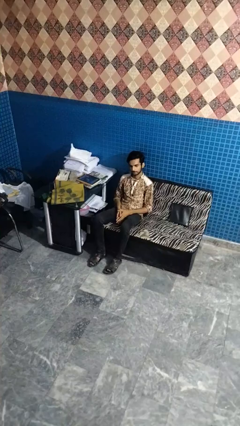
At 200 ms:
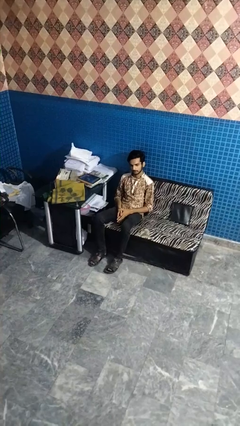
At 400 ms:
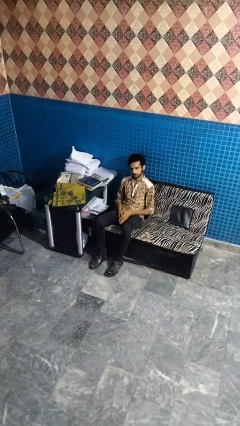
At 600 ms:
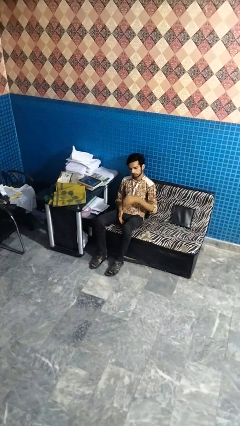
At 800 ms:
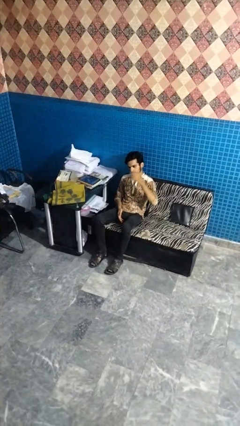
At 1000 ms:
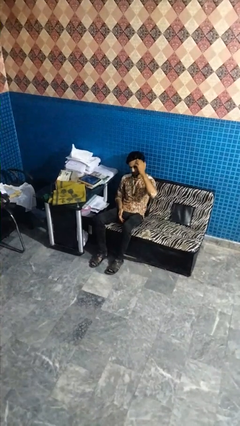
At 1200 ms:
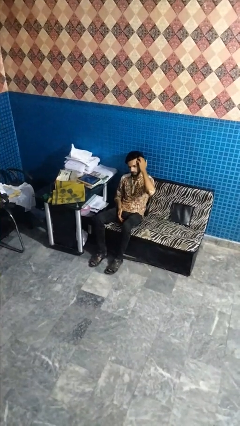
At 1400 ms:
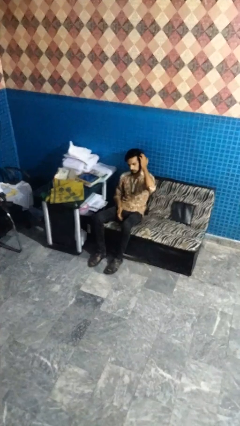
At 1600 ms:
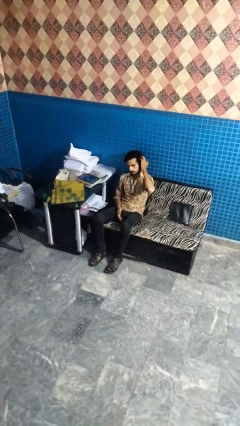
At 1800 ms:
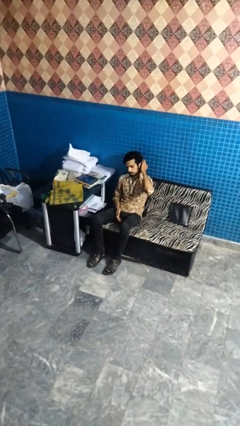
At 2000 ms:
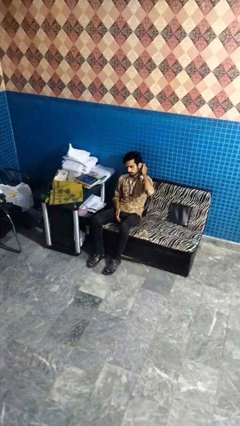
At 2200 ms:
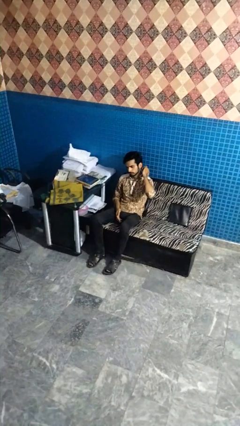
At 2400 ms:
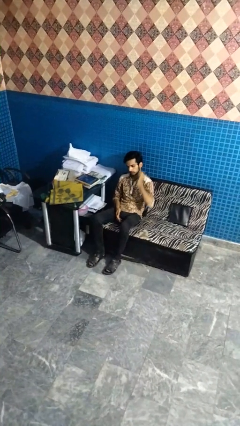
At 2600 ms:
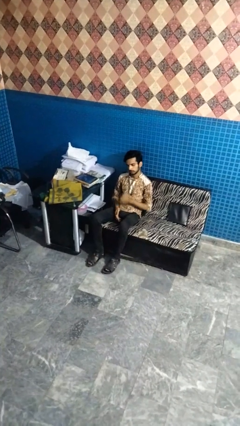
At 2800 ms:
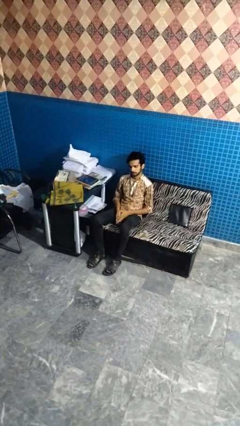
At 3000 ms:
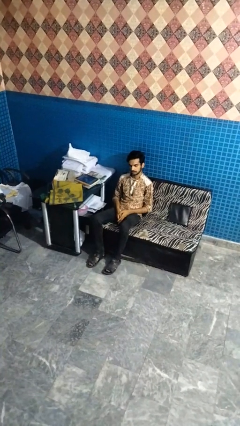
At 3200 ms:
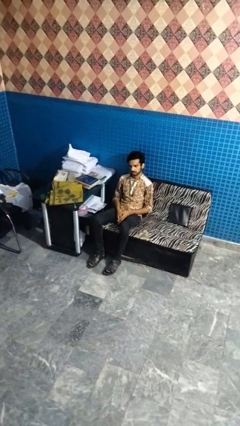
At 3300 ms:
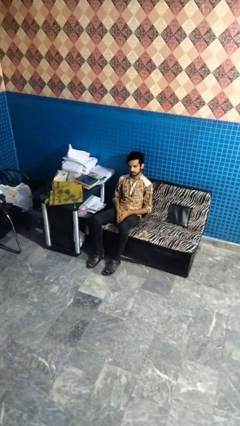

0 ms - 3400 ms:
person strokes hair

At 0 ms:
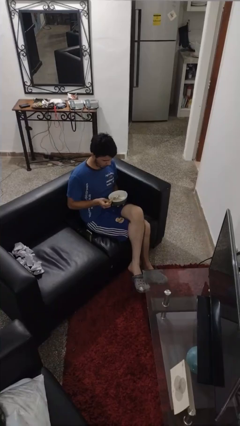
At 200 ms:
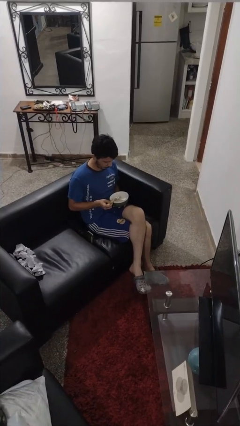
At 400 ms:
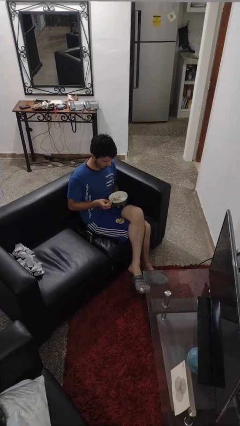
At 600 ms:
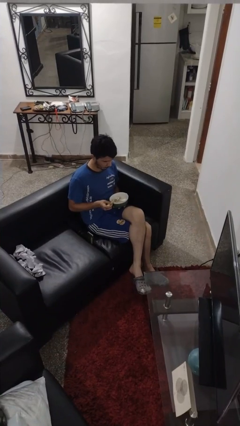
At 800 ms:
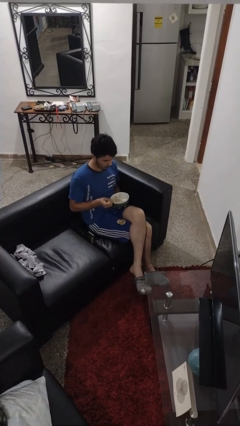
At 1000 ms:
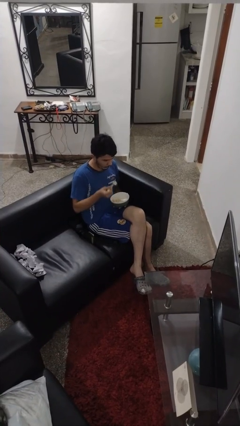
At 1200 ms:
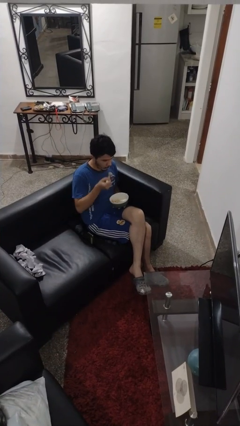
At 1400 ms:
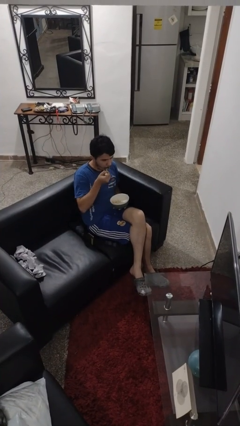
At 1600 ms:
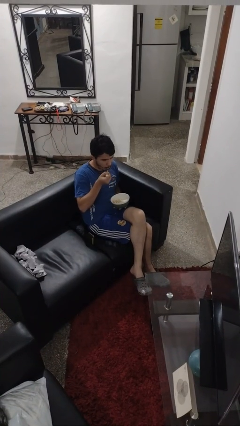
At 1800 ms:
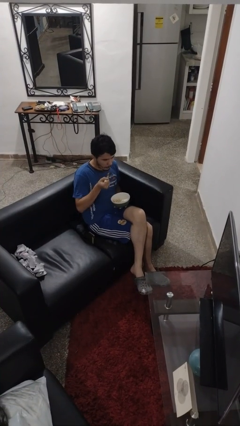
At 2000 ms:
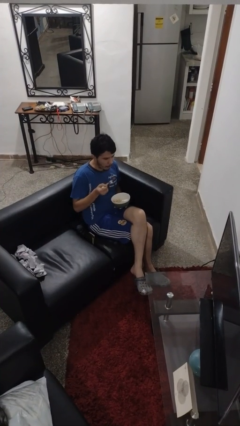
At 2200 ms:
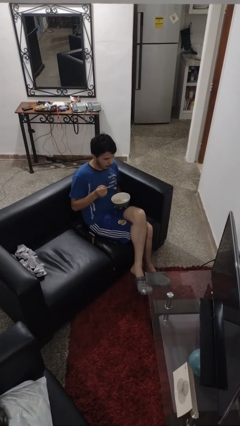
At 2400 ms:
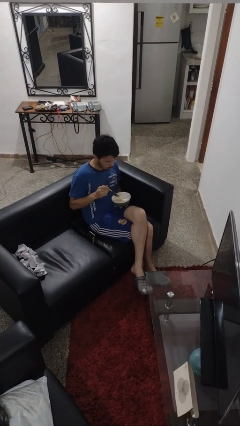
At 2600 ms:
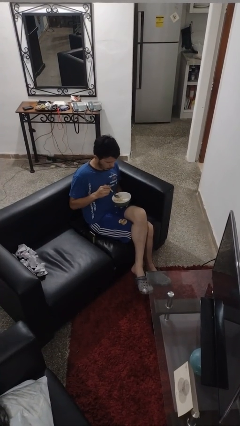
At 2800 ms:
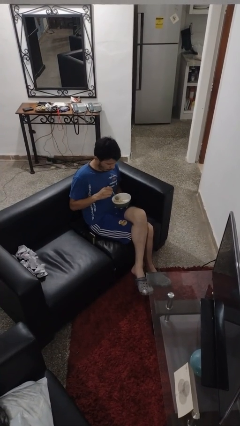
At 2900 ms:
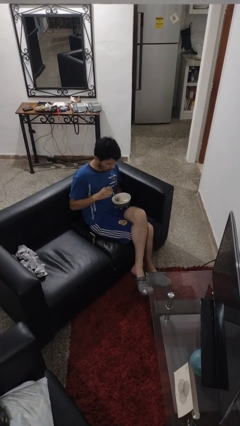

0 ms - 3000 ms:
person eats with utensil

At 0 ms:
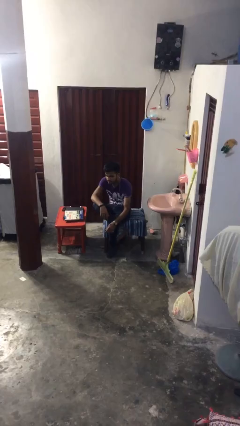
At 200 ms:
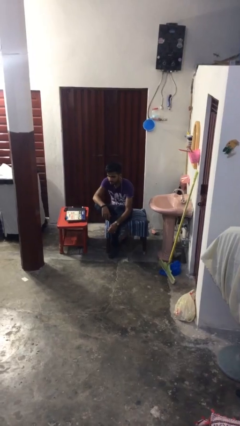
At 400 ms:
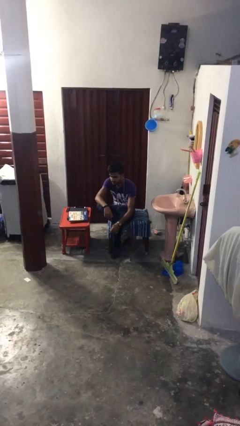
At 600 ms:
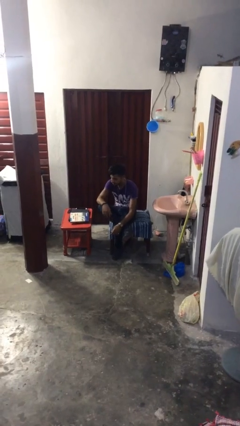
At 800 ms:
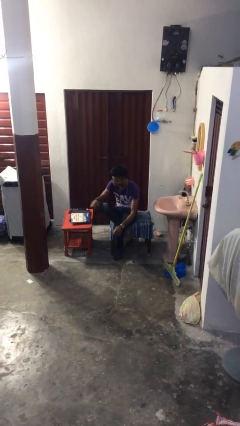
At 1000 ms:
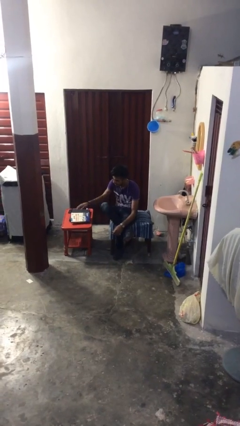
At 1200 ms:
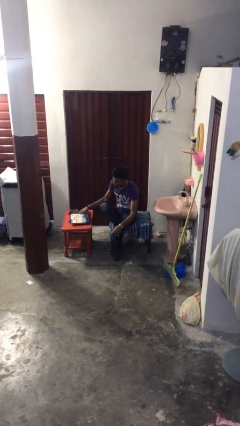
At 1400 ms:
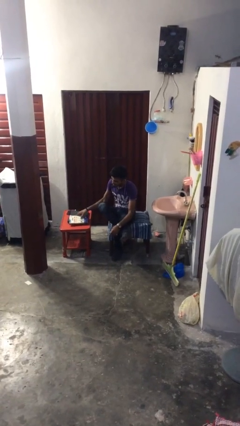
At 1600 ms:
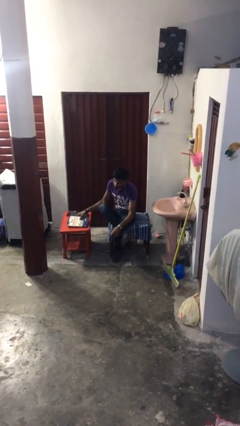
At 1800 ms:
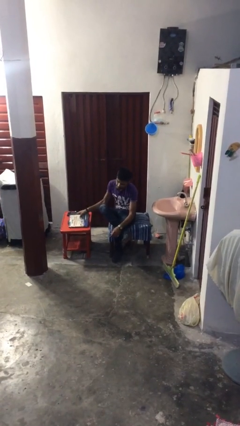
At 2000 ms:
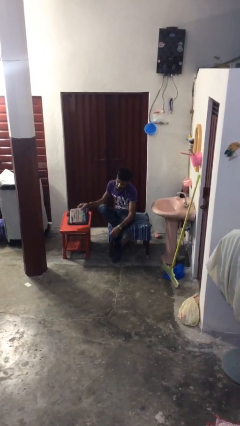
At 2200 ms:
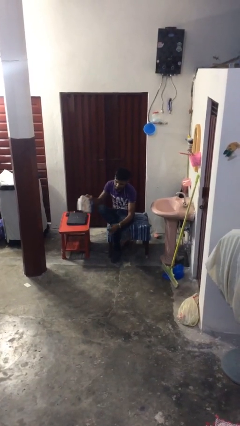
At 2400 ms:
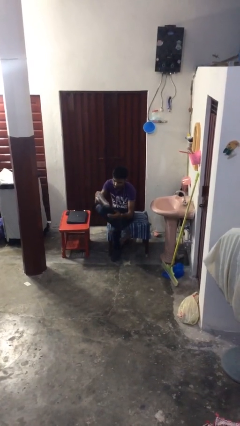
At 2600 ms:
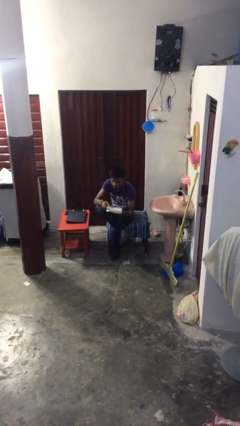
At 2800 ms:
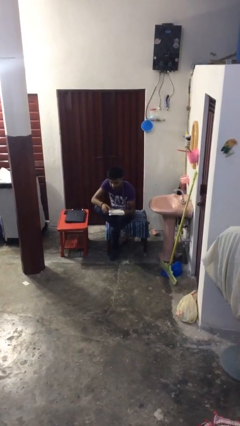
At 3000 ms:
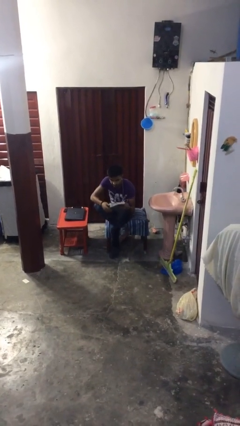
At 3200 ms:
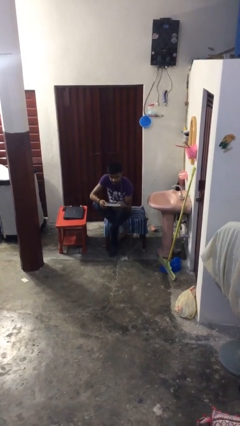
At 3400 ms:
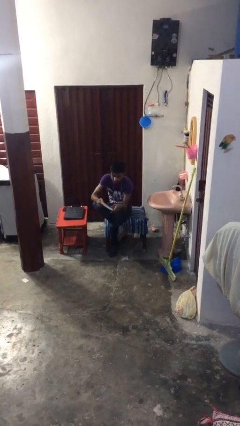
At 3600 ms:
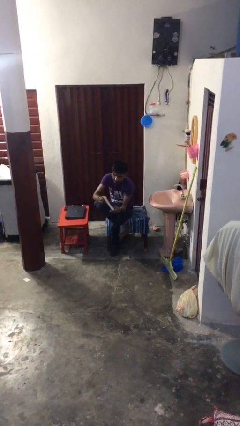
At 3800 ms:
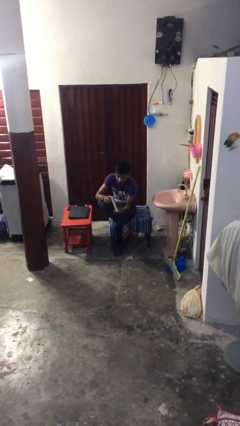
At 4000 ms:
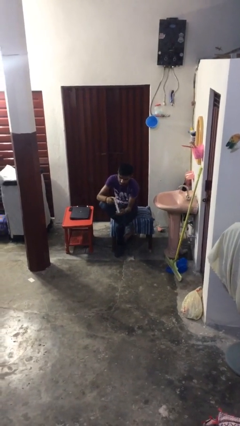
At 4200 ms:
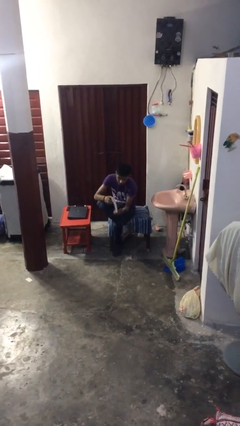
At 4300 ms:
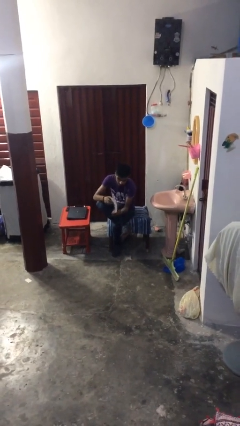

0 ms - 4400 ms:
person picks up object from table

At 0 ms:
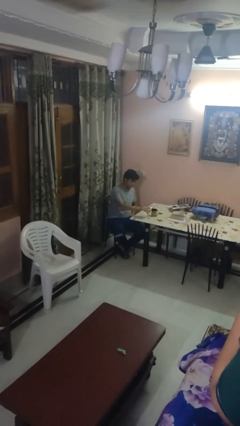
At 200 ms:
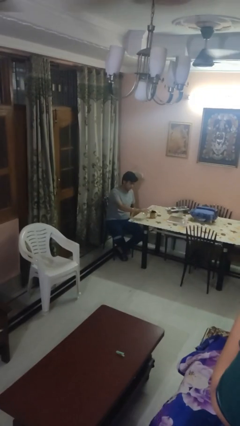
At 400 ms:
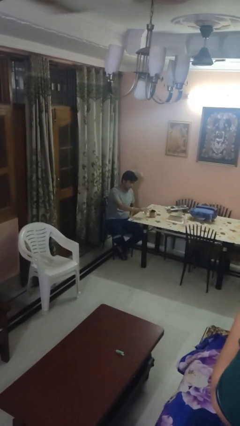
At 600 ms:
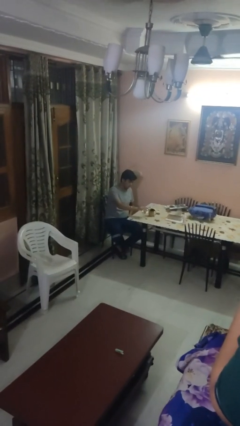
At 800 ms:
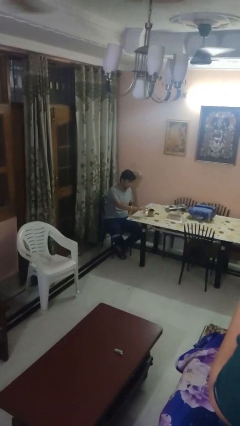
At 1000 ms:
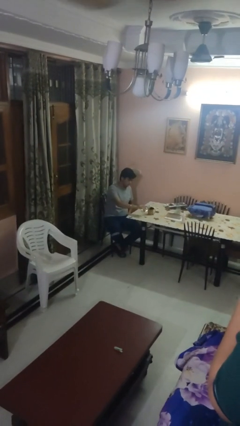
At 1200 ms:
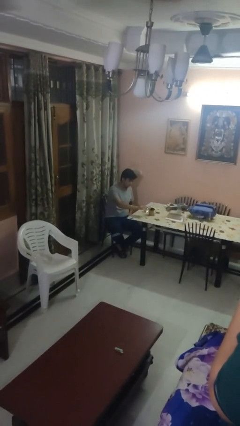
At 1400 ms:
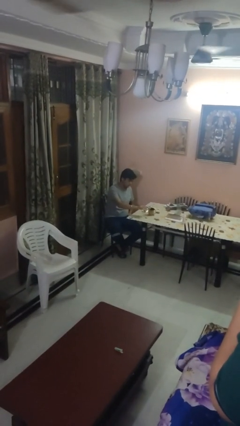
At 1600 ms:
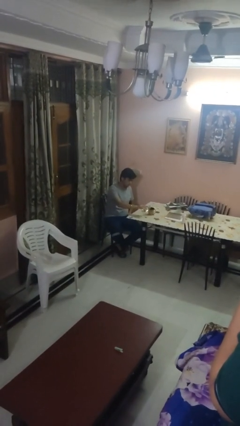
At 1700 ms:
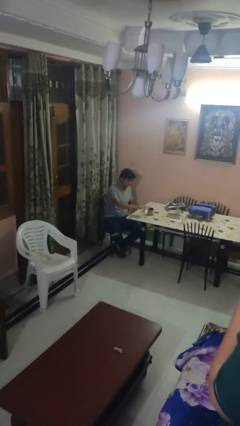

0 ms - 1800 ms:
person pours liquid into cup

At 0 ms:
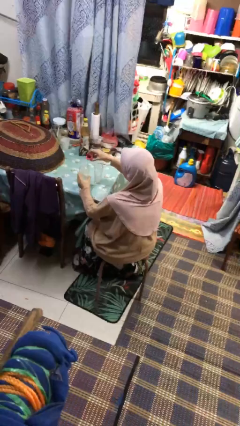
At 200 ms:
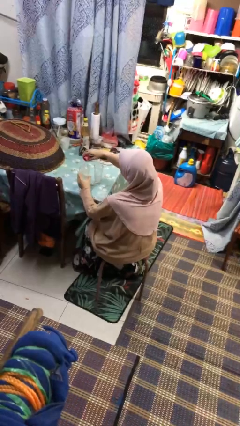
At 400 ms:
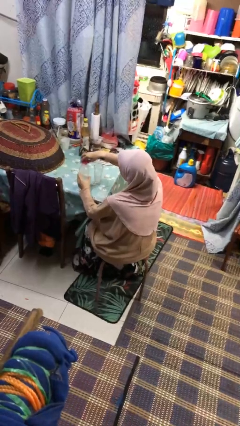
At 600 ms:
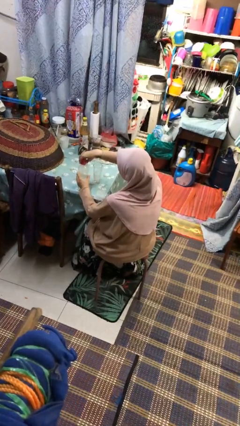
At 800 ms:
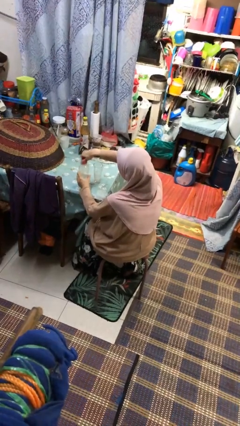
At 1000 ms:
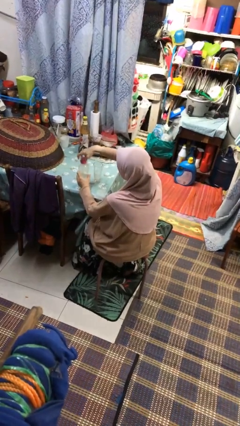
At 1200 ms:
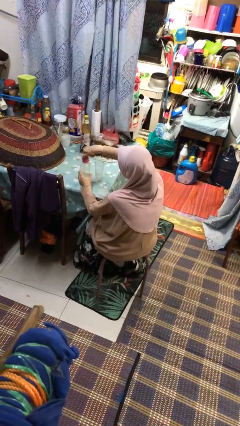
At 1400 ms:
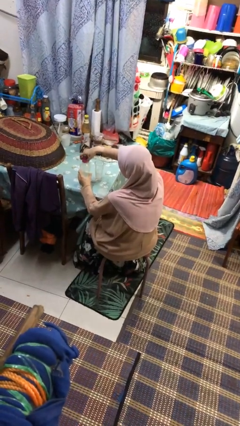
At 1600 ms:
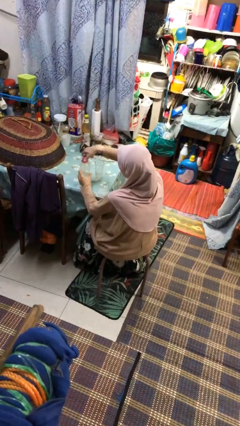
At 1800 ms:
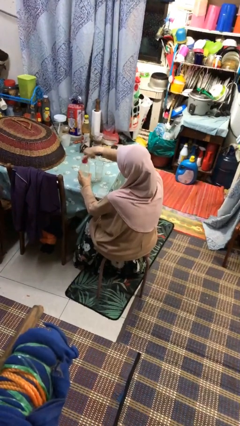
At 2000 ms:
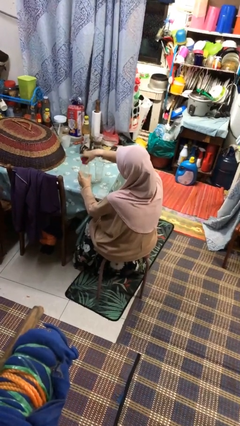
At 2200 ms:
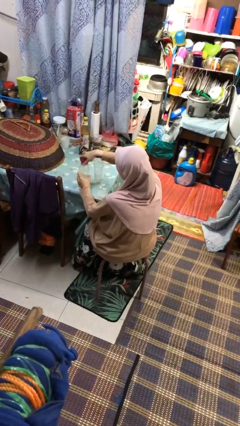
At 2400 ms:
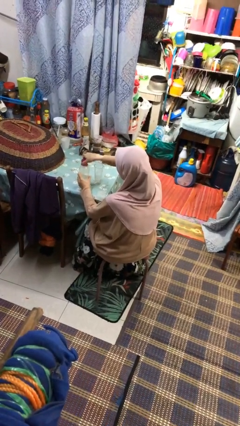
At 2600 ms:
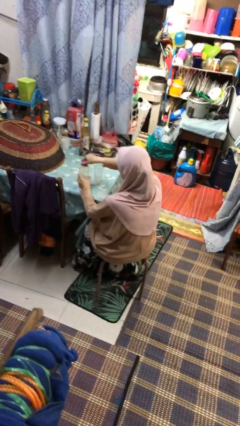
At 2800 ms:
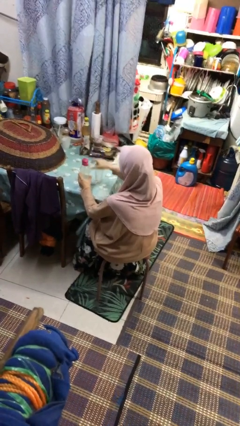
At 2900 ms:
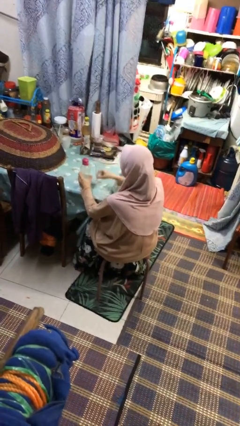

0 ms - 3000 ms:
person screws lid to bottle

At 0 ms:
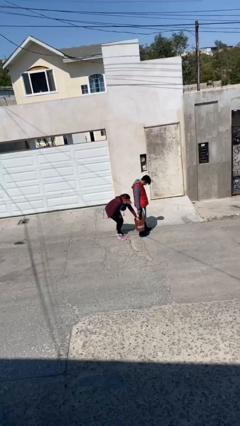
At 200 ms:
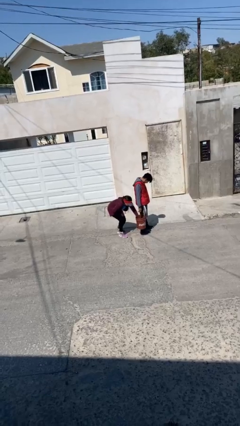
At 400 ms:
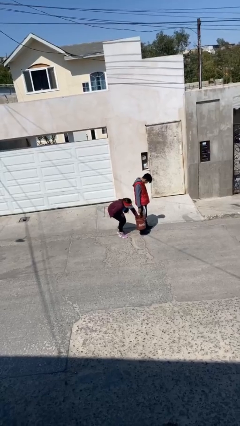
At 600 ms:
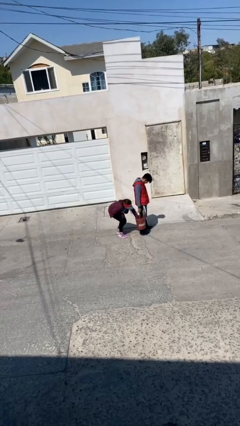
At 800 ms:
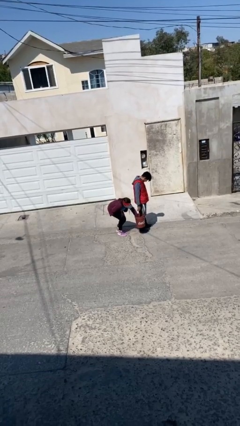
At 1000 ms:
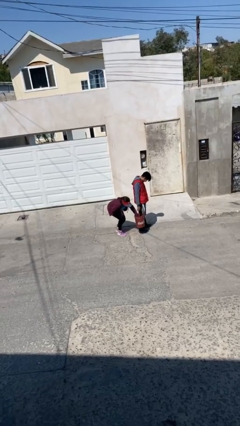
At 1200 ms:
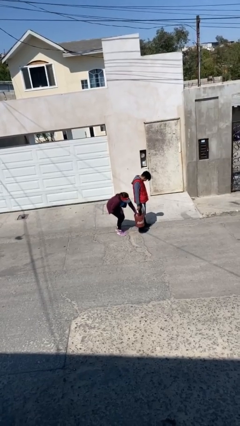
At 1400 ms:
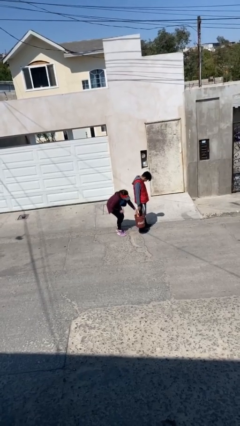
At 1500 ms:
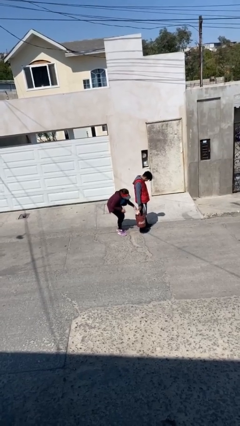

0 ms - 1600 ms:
person steals object from person

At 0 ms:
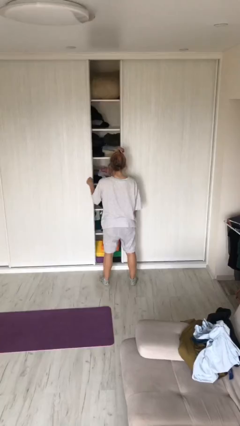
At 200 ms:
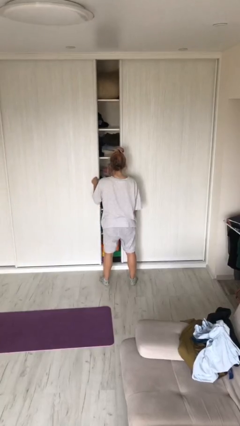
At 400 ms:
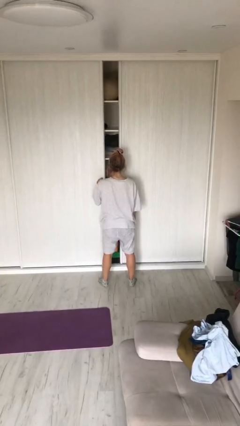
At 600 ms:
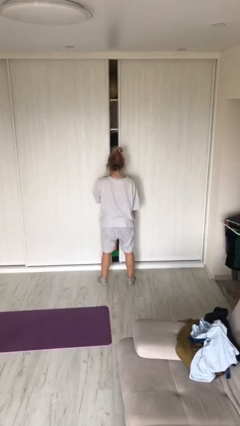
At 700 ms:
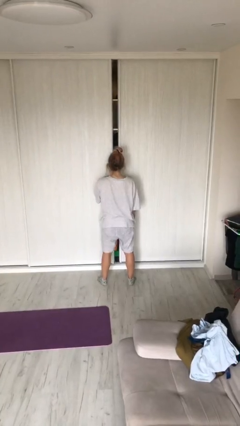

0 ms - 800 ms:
person closes sliding door
